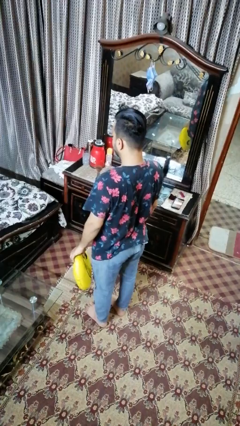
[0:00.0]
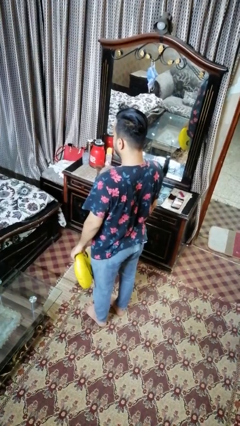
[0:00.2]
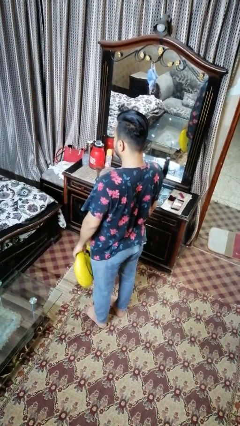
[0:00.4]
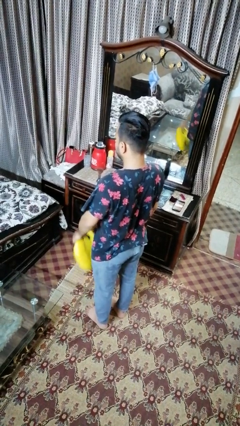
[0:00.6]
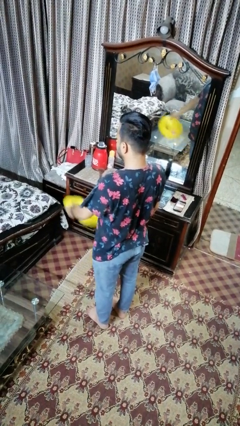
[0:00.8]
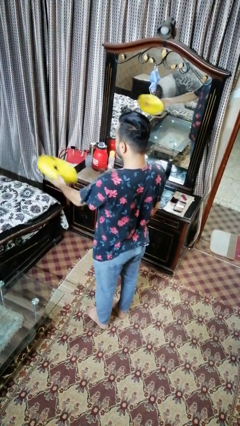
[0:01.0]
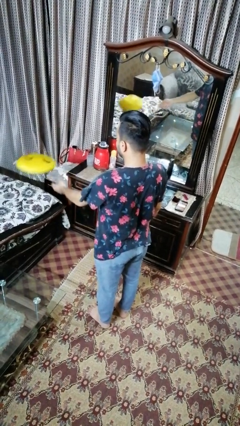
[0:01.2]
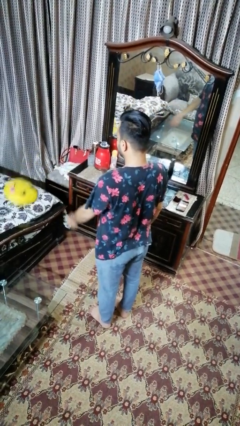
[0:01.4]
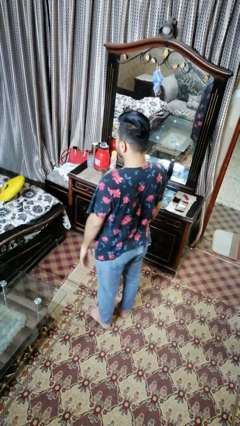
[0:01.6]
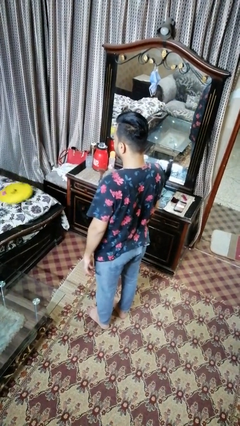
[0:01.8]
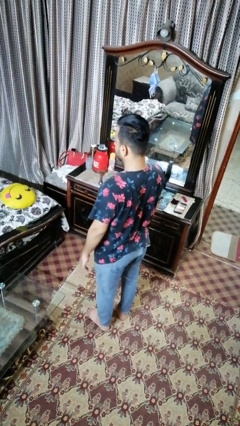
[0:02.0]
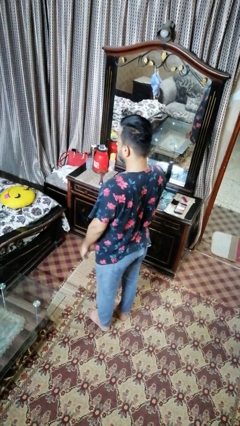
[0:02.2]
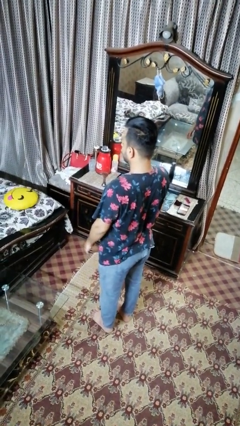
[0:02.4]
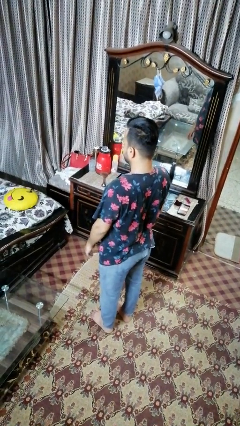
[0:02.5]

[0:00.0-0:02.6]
person throws object on bed

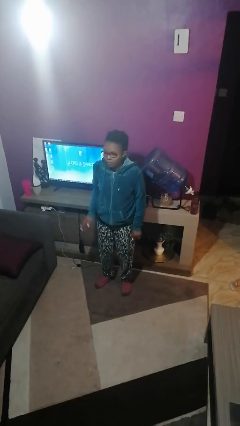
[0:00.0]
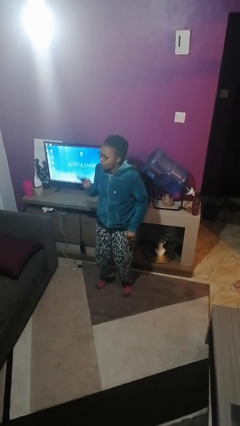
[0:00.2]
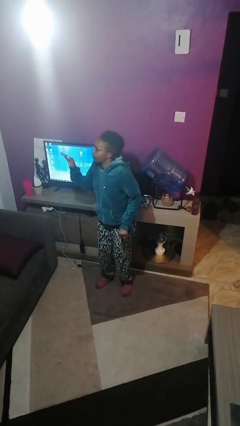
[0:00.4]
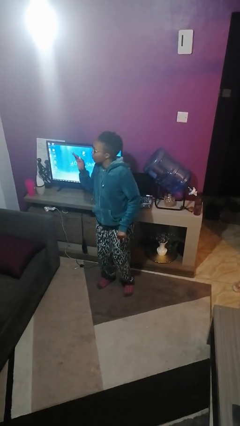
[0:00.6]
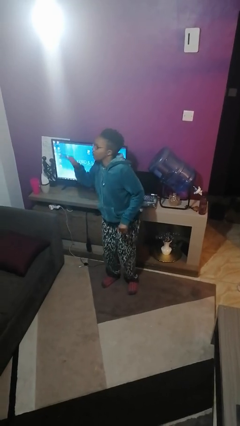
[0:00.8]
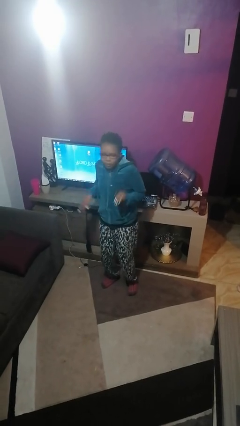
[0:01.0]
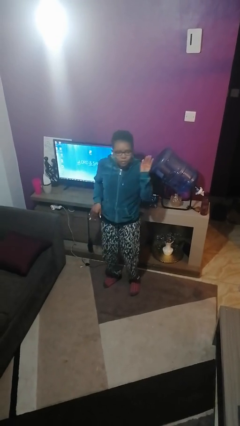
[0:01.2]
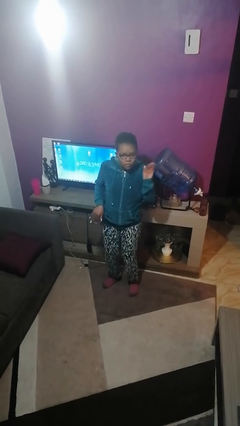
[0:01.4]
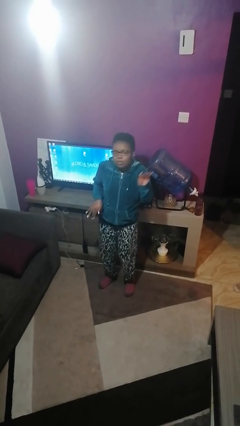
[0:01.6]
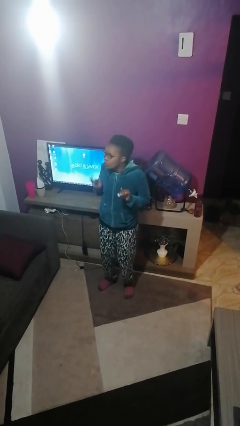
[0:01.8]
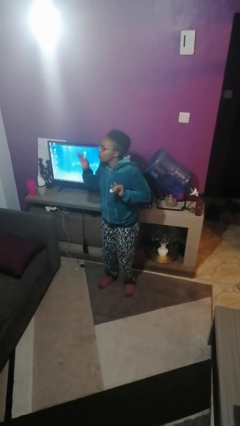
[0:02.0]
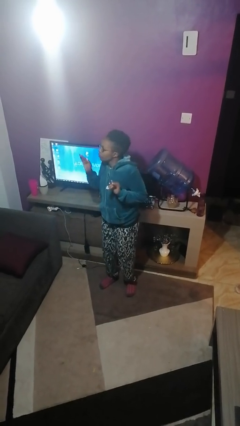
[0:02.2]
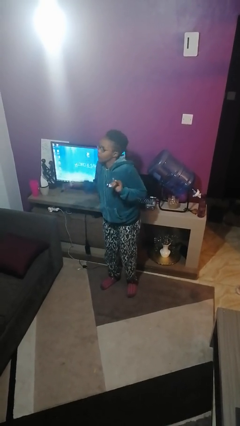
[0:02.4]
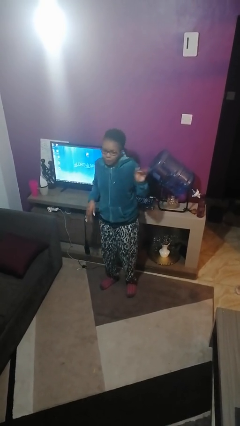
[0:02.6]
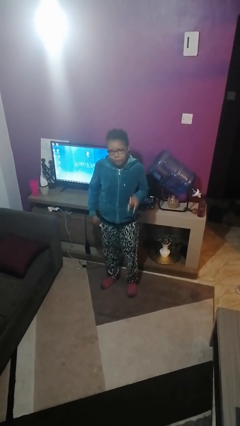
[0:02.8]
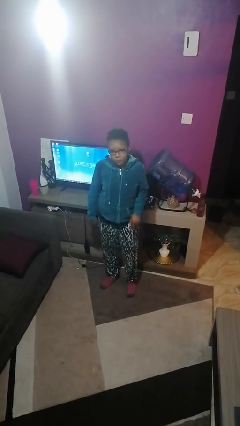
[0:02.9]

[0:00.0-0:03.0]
person dances in place

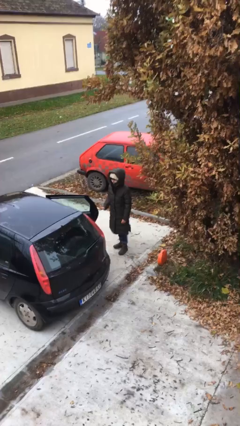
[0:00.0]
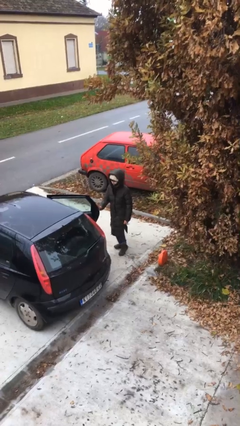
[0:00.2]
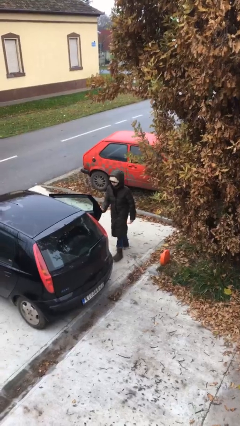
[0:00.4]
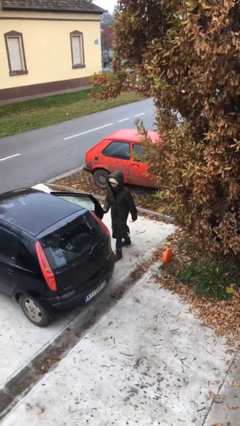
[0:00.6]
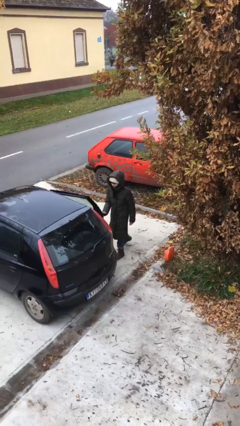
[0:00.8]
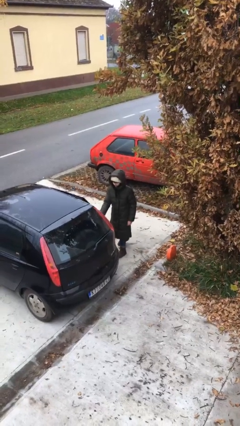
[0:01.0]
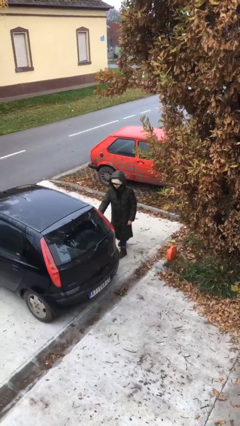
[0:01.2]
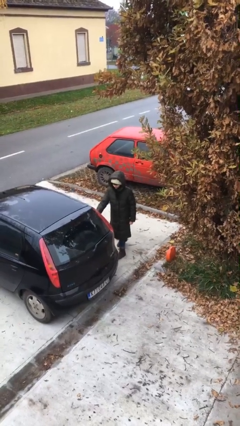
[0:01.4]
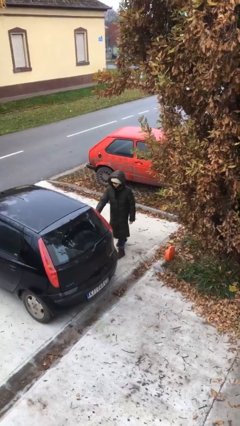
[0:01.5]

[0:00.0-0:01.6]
person closes car door

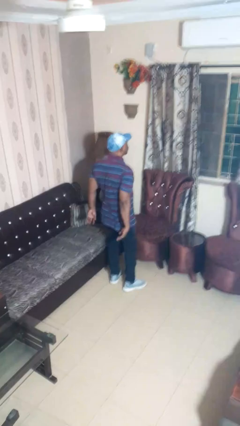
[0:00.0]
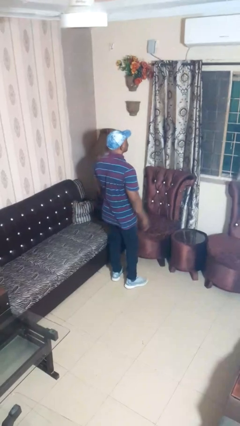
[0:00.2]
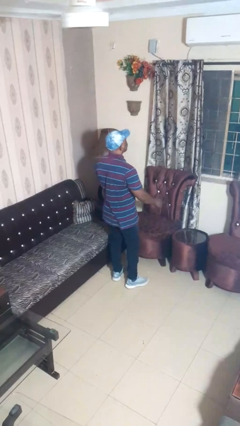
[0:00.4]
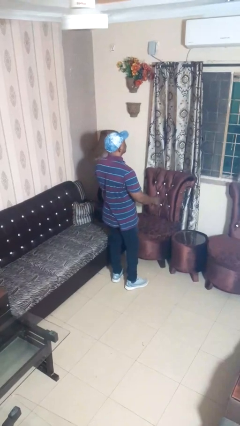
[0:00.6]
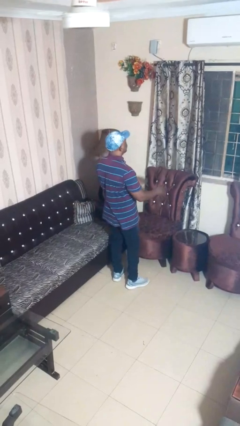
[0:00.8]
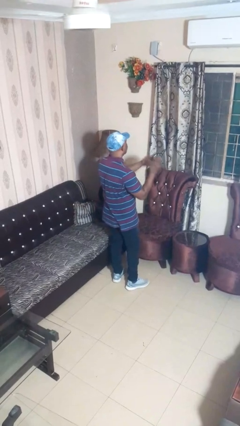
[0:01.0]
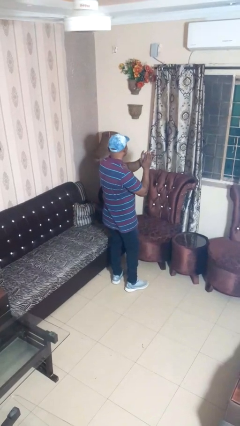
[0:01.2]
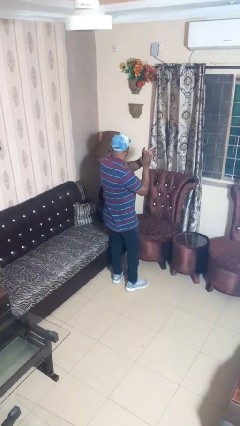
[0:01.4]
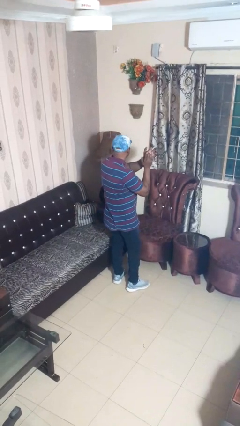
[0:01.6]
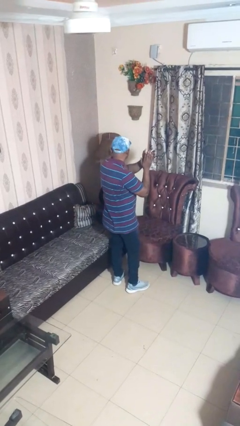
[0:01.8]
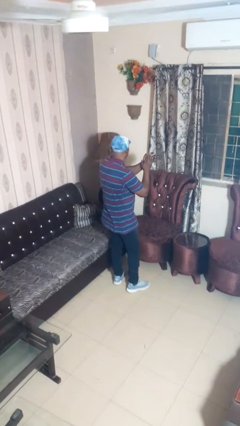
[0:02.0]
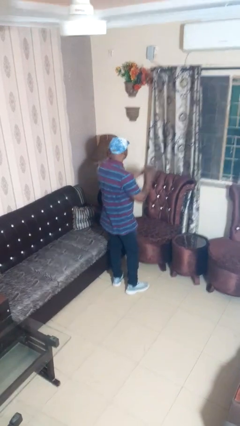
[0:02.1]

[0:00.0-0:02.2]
person claps hands

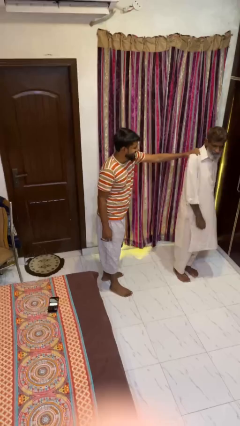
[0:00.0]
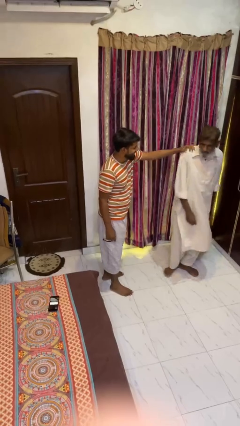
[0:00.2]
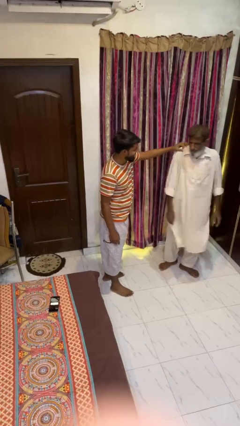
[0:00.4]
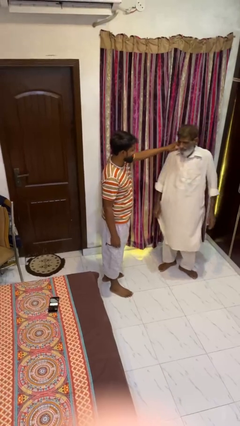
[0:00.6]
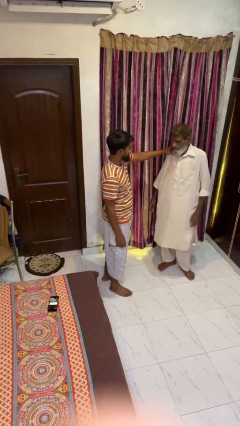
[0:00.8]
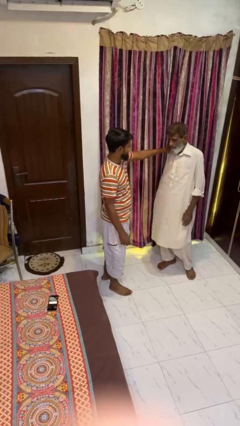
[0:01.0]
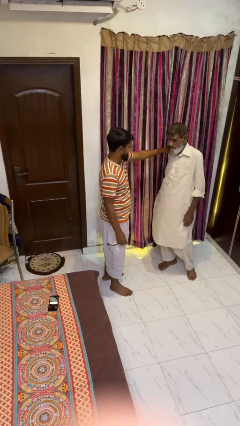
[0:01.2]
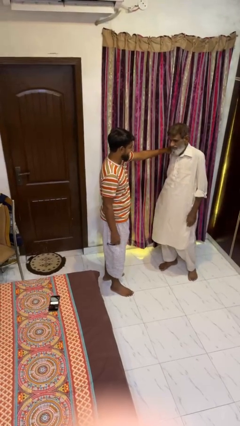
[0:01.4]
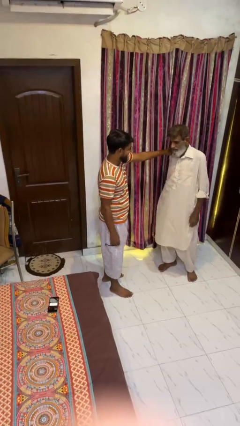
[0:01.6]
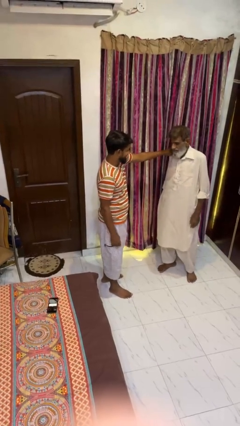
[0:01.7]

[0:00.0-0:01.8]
person spins person around

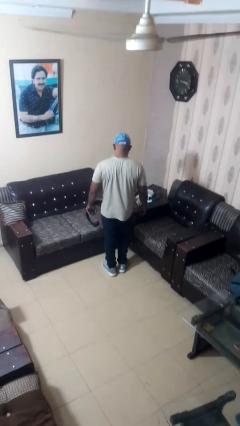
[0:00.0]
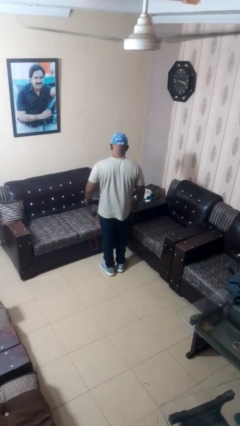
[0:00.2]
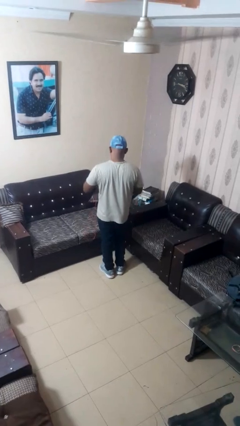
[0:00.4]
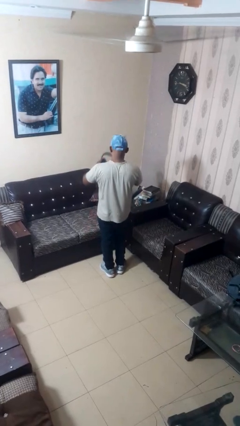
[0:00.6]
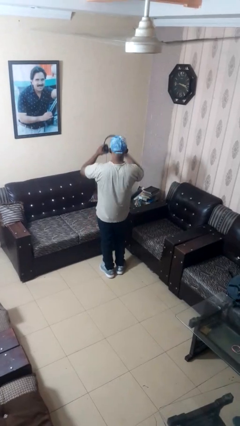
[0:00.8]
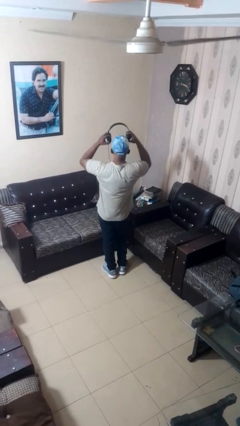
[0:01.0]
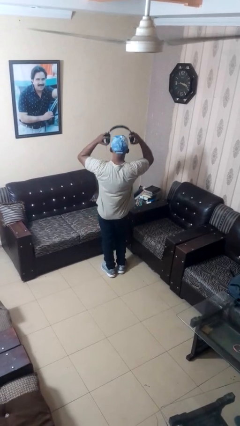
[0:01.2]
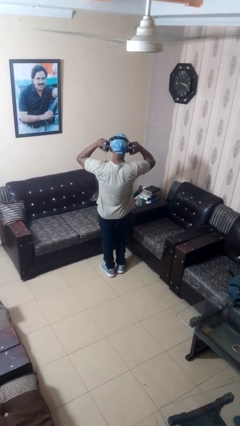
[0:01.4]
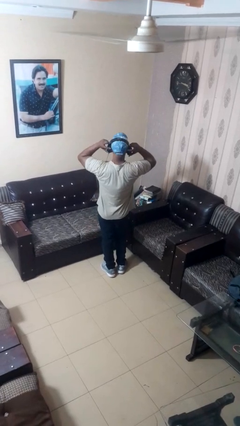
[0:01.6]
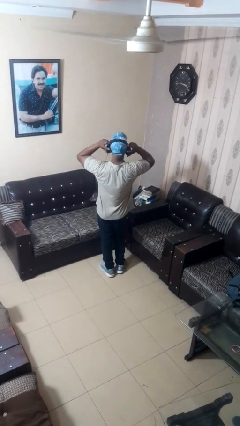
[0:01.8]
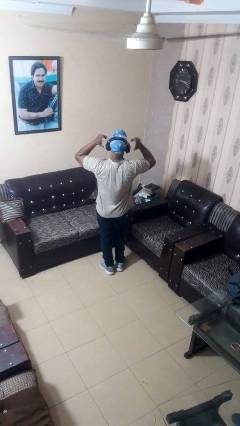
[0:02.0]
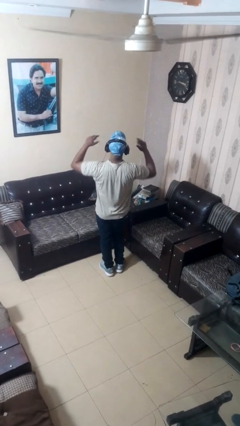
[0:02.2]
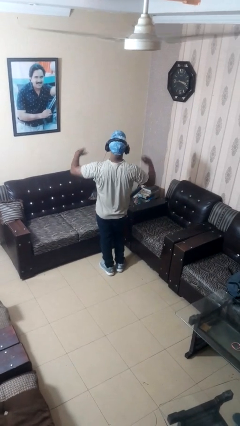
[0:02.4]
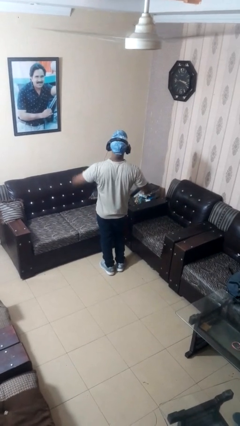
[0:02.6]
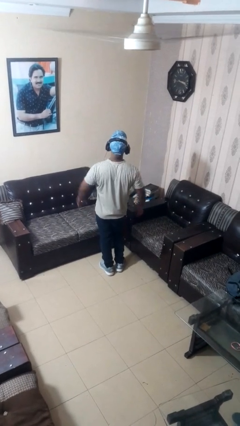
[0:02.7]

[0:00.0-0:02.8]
person puts on headphones

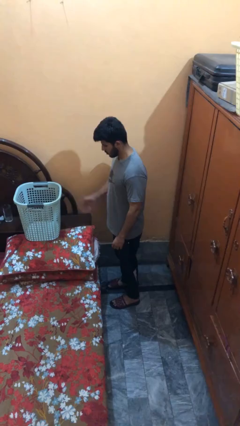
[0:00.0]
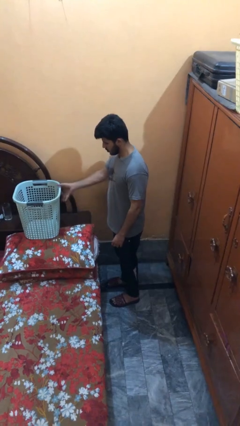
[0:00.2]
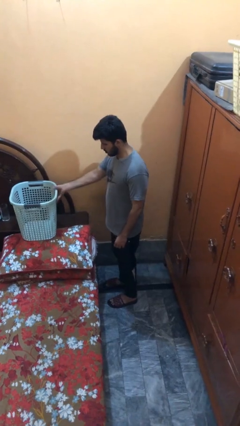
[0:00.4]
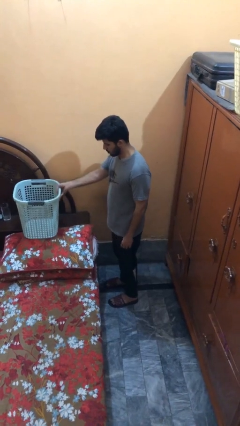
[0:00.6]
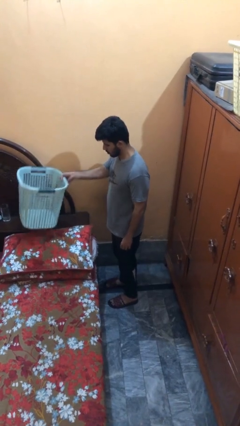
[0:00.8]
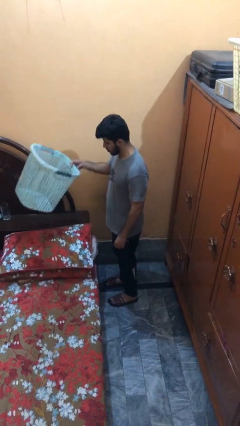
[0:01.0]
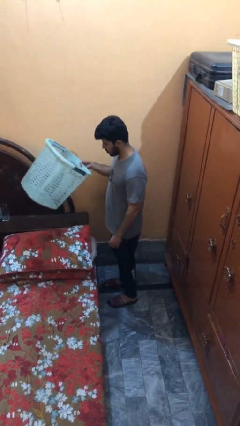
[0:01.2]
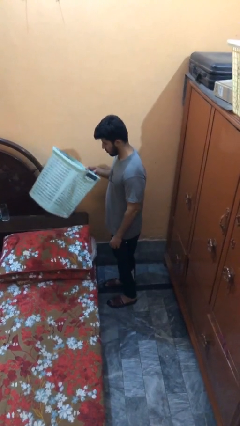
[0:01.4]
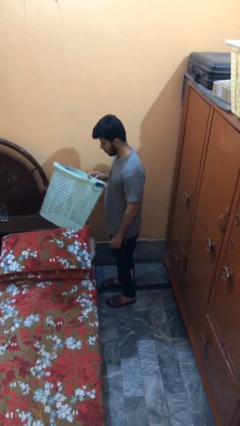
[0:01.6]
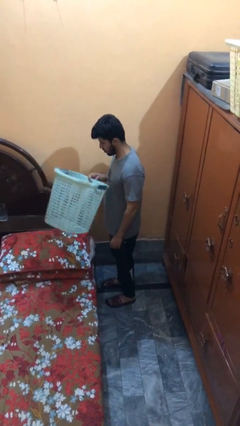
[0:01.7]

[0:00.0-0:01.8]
person picks up object from bed

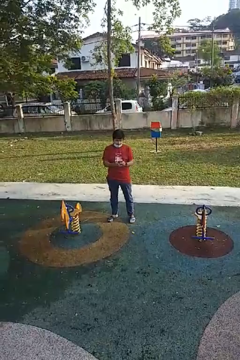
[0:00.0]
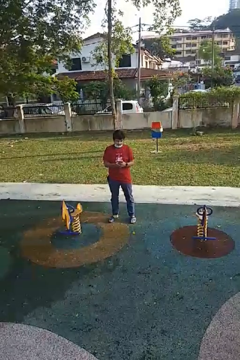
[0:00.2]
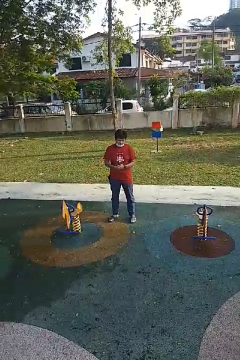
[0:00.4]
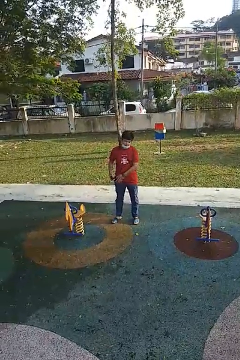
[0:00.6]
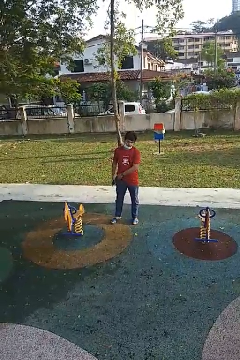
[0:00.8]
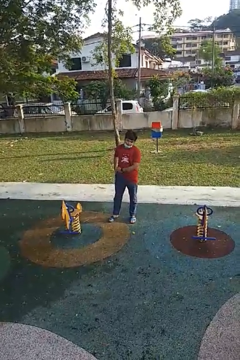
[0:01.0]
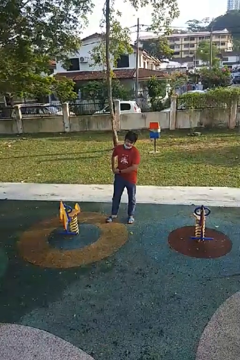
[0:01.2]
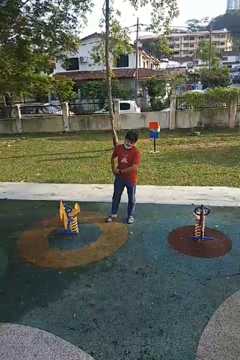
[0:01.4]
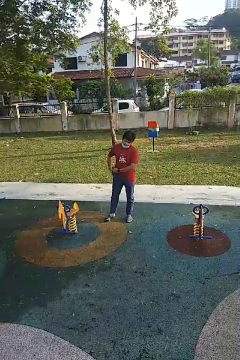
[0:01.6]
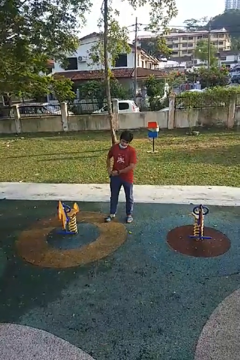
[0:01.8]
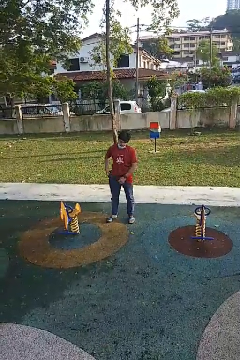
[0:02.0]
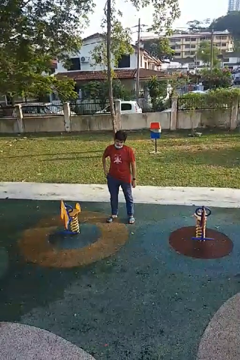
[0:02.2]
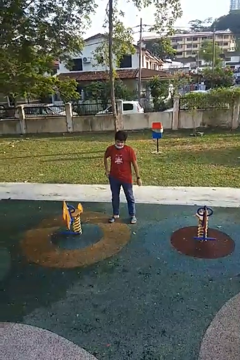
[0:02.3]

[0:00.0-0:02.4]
person puts phone into pocket
